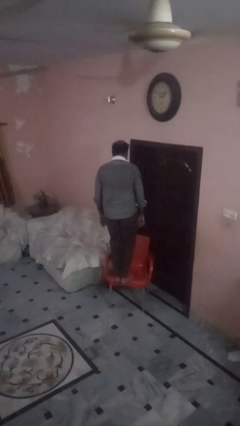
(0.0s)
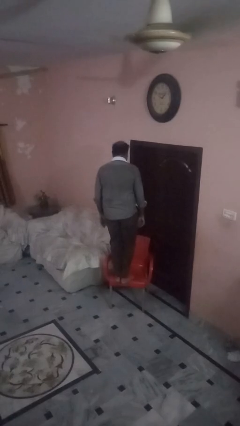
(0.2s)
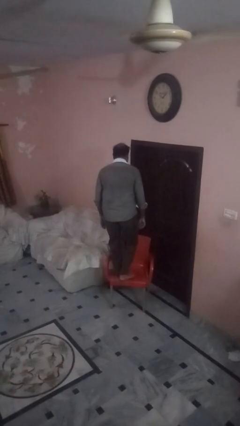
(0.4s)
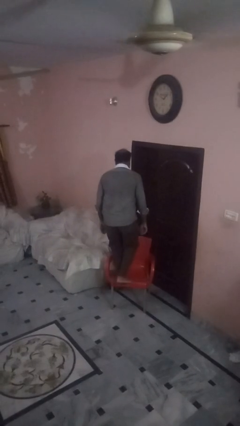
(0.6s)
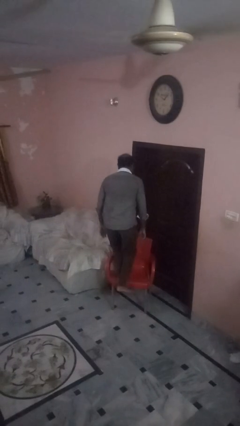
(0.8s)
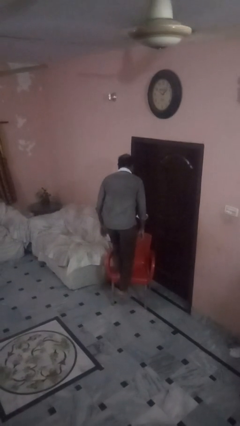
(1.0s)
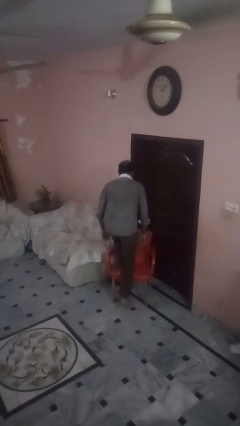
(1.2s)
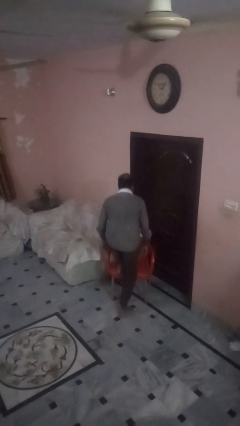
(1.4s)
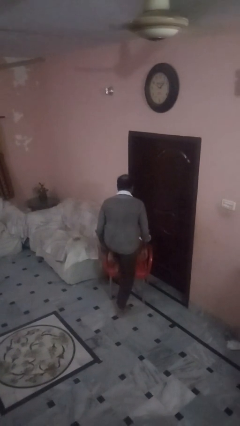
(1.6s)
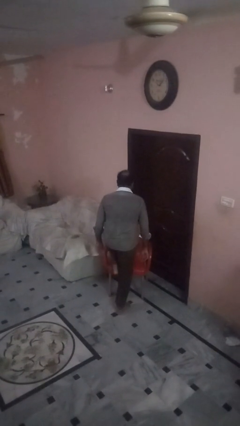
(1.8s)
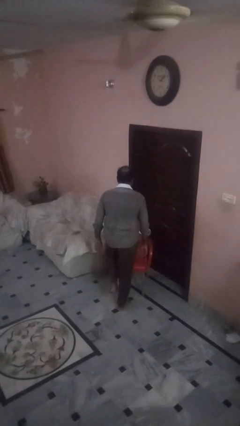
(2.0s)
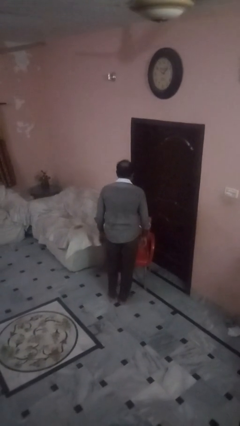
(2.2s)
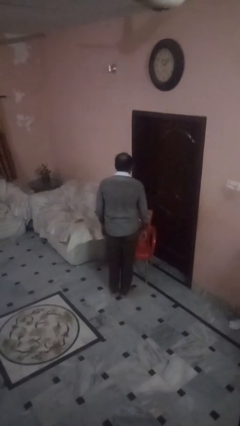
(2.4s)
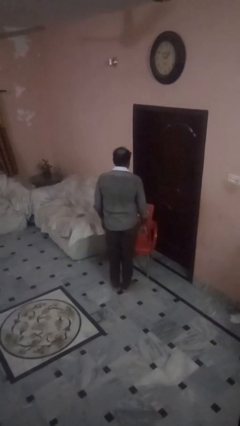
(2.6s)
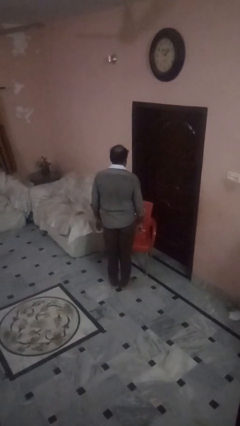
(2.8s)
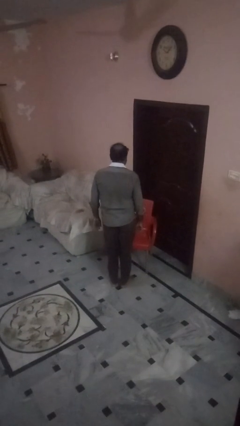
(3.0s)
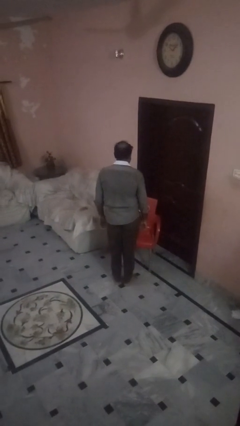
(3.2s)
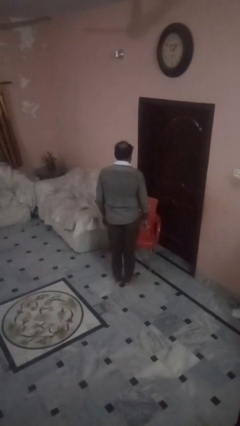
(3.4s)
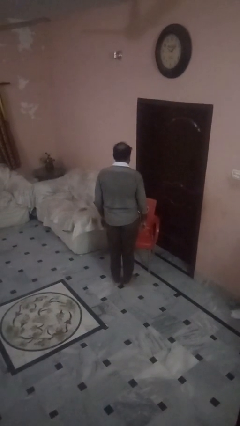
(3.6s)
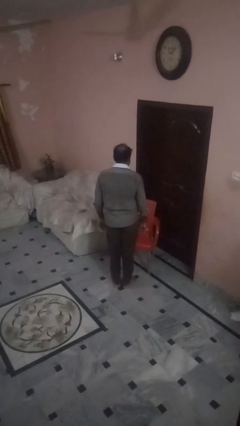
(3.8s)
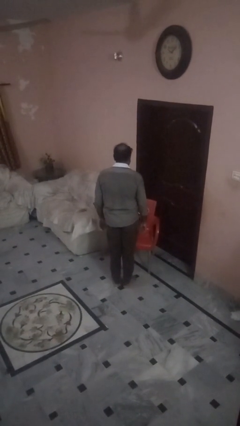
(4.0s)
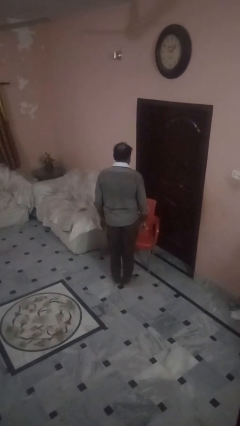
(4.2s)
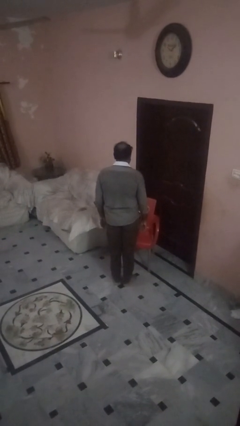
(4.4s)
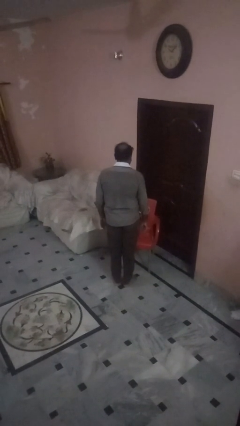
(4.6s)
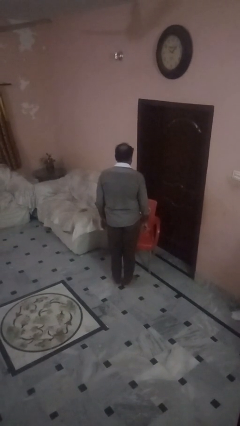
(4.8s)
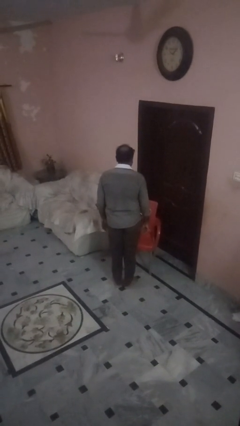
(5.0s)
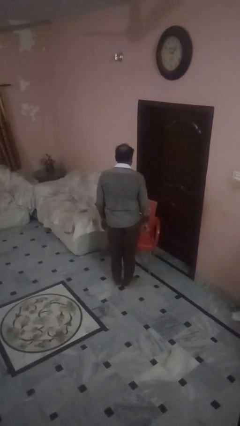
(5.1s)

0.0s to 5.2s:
person climbs off chair

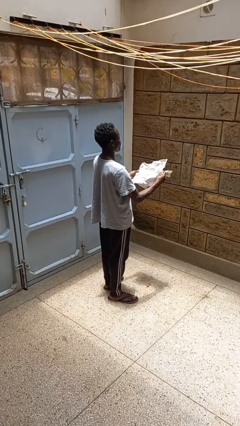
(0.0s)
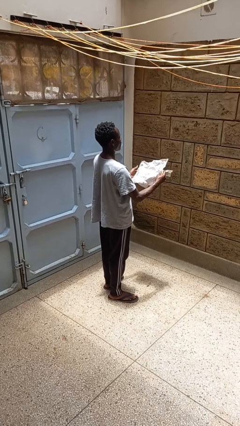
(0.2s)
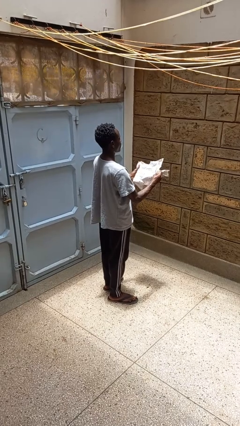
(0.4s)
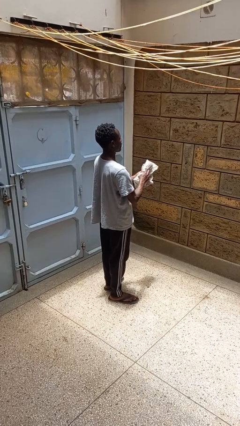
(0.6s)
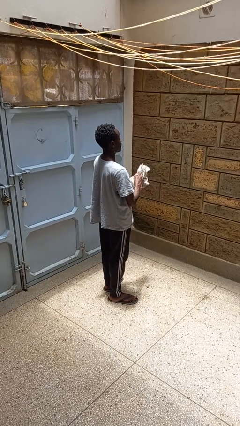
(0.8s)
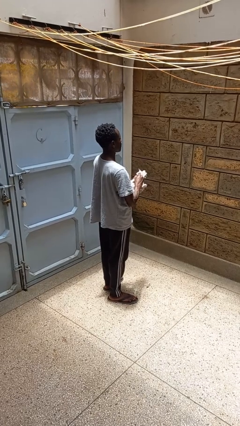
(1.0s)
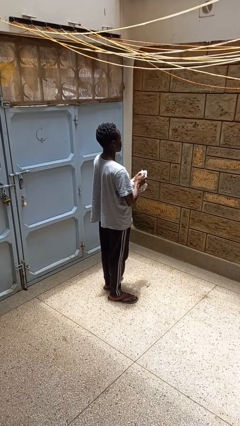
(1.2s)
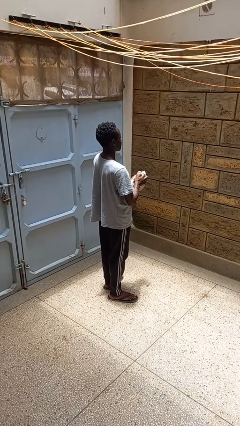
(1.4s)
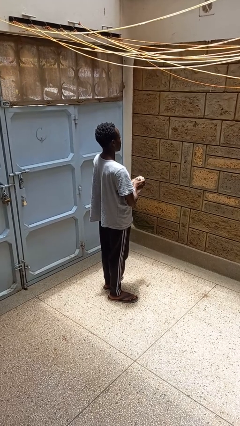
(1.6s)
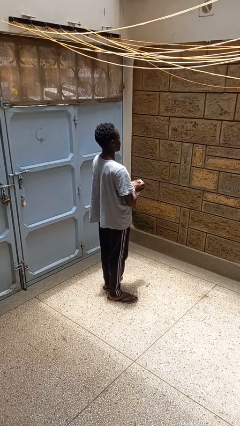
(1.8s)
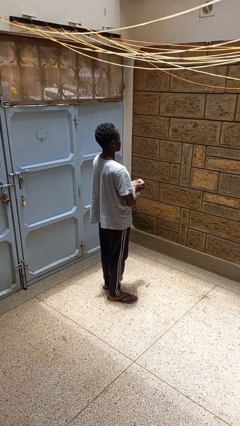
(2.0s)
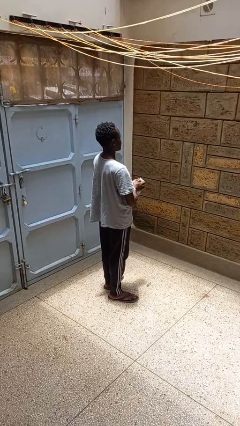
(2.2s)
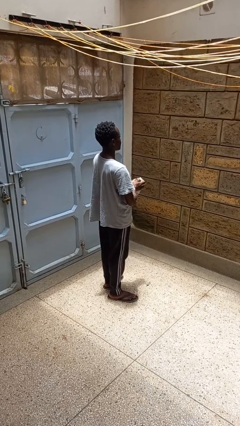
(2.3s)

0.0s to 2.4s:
person crumples paper

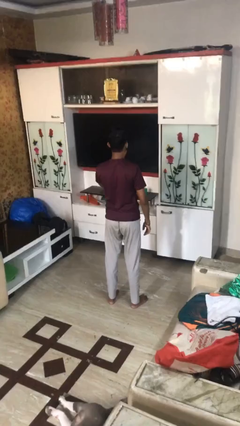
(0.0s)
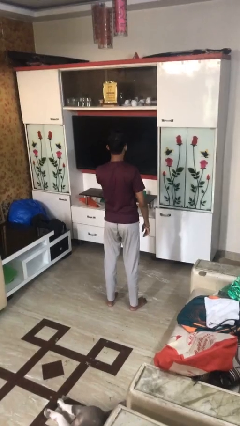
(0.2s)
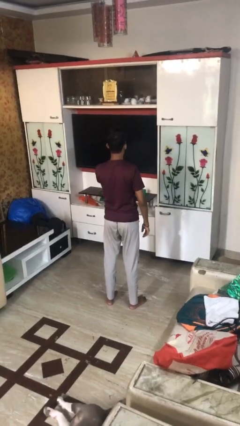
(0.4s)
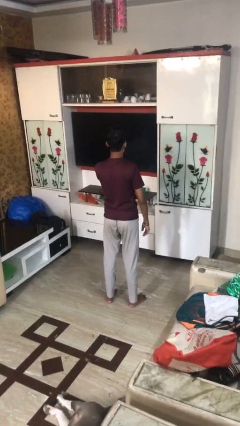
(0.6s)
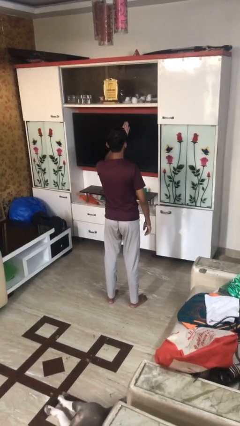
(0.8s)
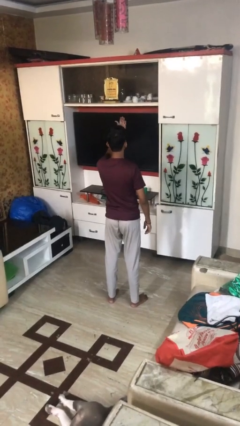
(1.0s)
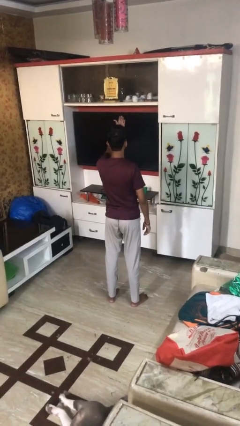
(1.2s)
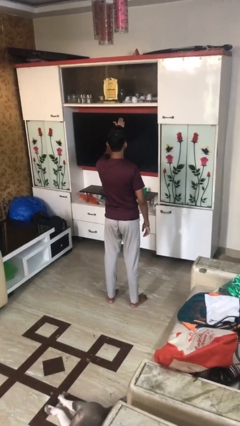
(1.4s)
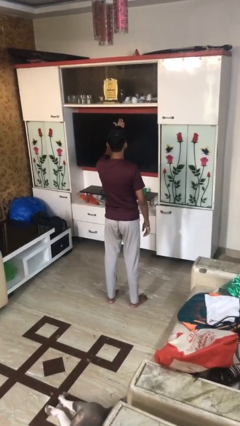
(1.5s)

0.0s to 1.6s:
person gestures blow kiss

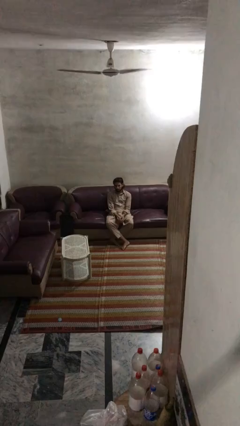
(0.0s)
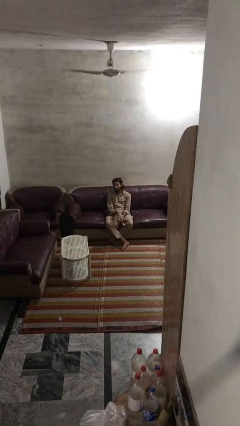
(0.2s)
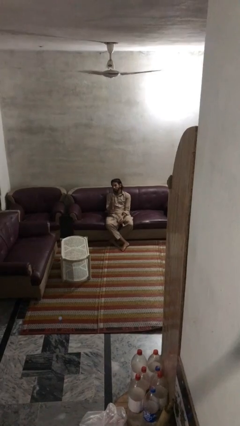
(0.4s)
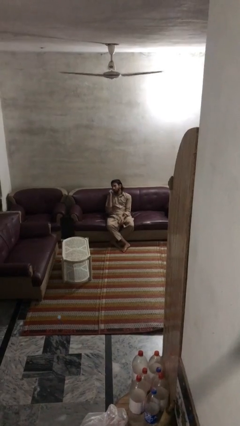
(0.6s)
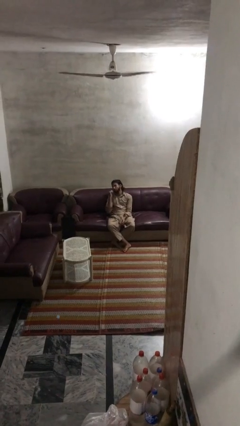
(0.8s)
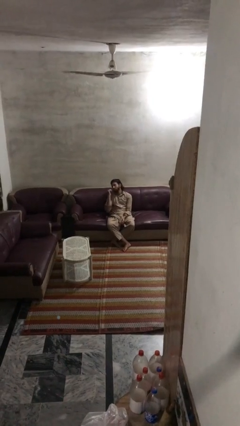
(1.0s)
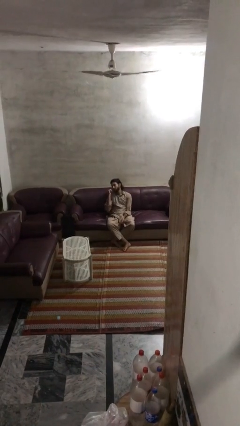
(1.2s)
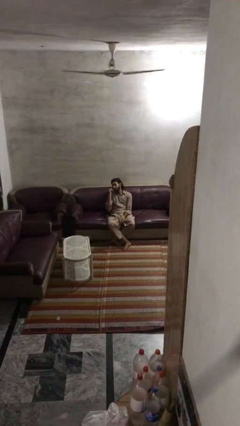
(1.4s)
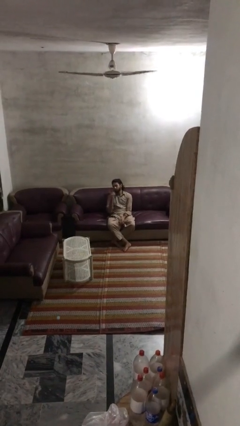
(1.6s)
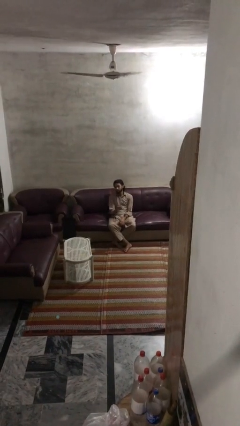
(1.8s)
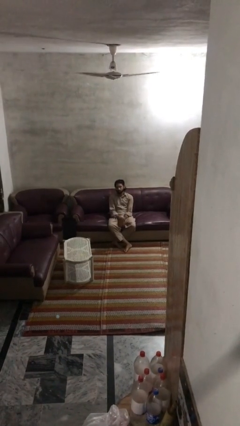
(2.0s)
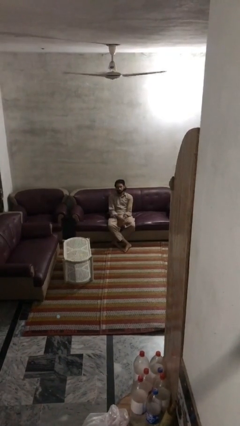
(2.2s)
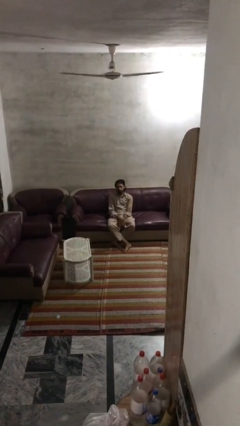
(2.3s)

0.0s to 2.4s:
person gestures behind me

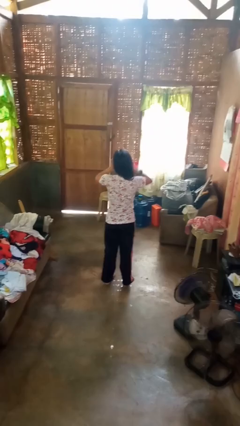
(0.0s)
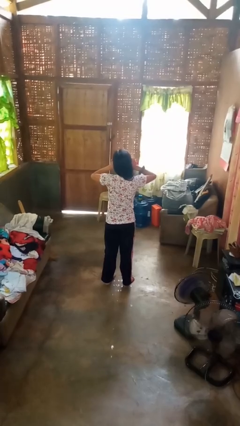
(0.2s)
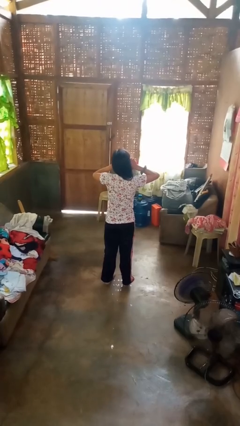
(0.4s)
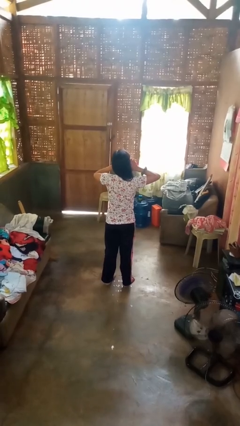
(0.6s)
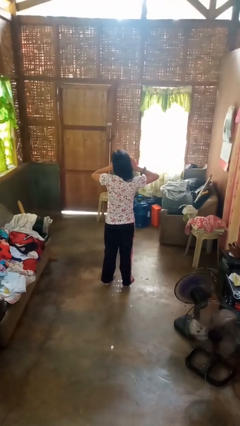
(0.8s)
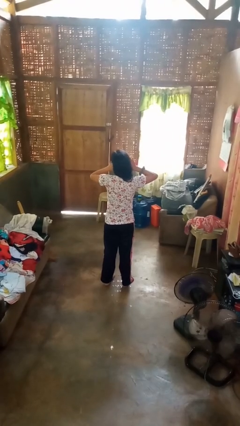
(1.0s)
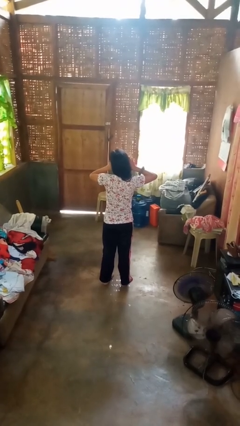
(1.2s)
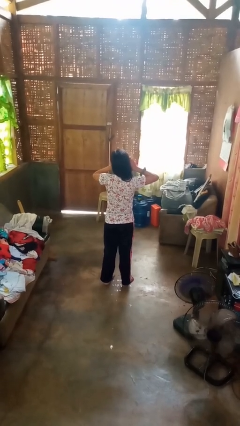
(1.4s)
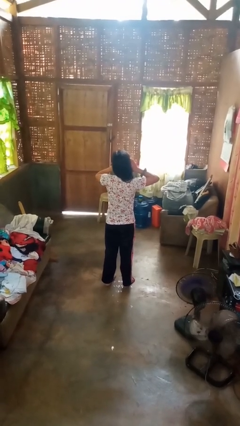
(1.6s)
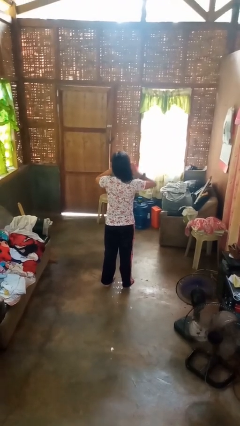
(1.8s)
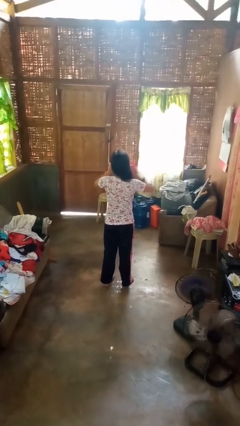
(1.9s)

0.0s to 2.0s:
person puts fingers in ear

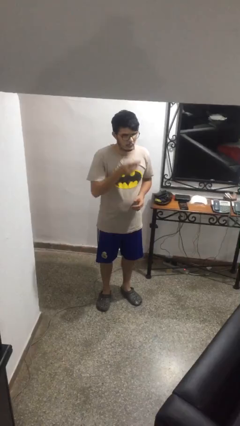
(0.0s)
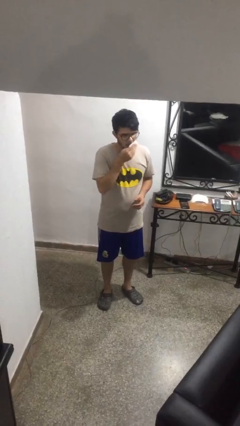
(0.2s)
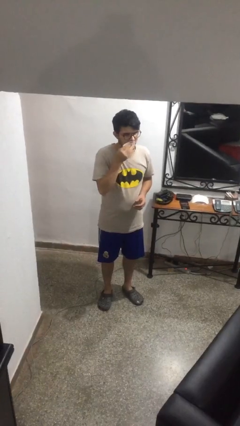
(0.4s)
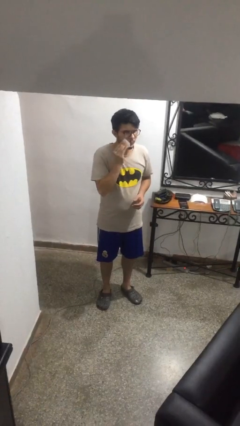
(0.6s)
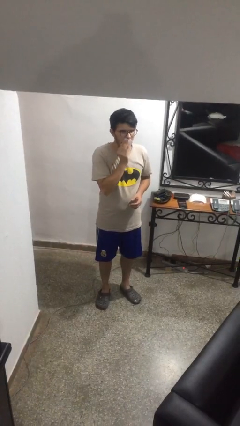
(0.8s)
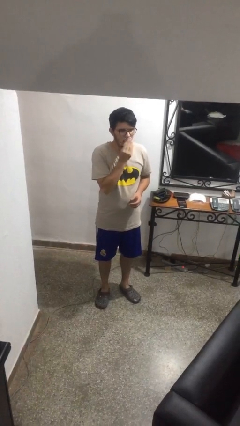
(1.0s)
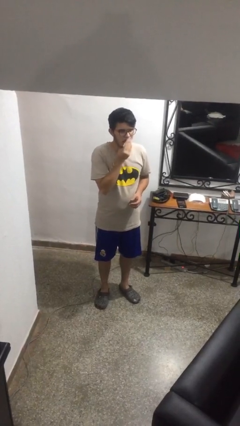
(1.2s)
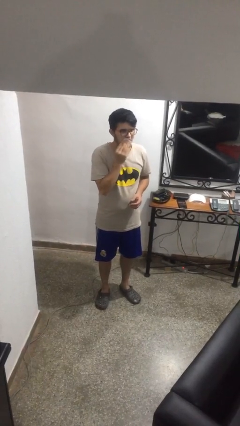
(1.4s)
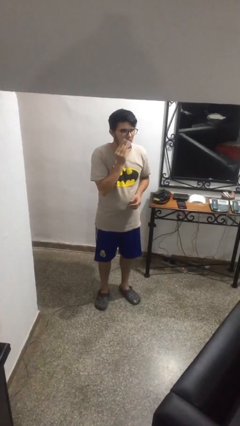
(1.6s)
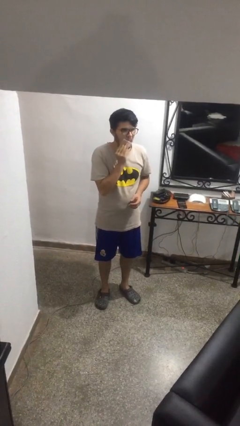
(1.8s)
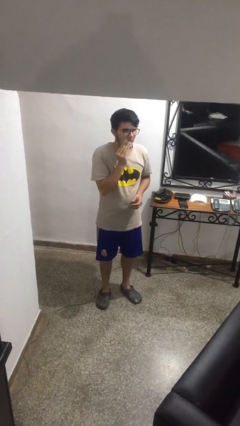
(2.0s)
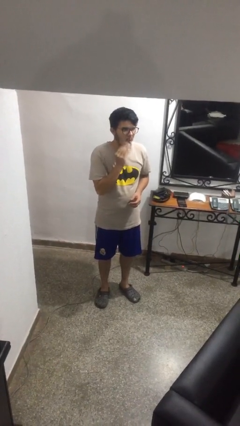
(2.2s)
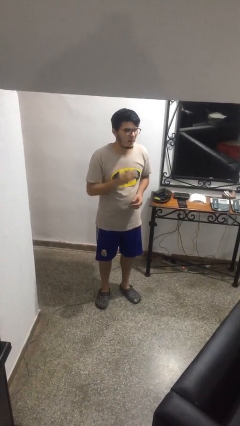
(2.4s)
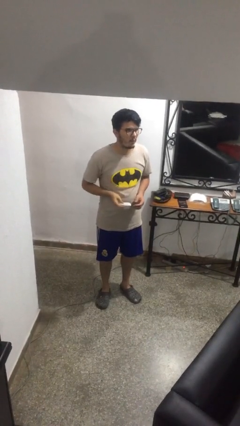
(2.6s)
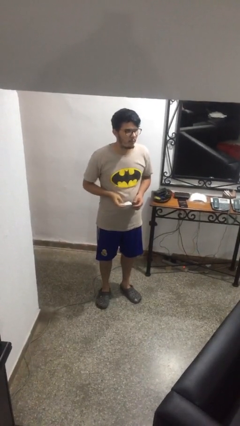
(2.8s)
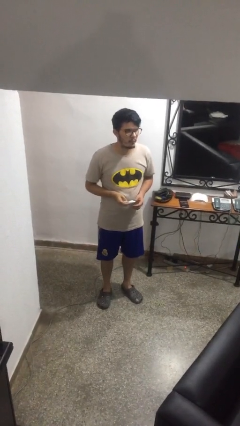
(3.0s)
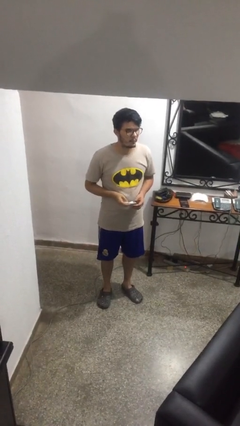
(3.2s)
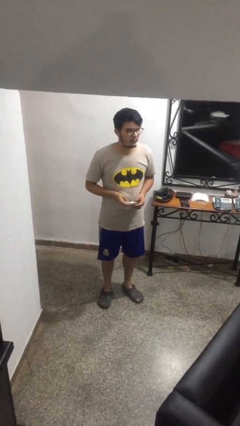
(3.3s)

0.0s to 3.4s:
person wipes mouth with napkin

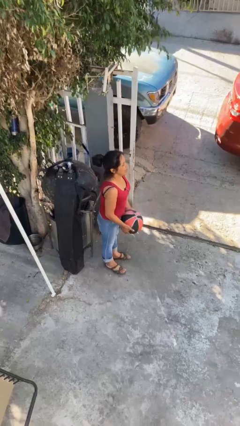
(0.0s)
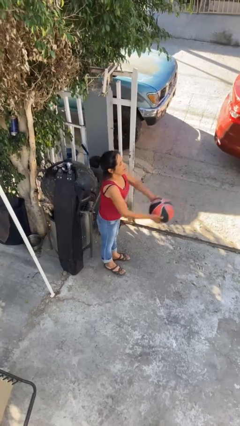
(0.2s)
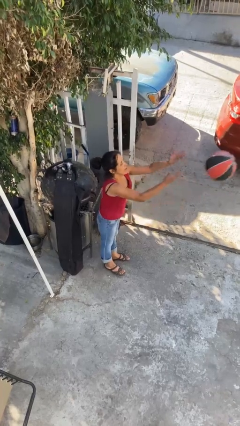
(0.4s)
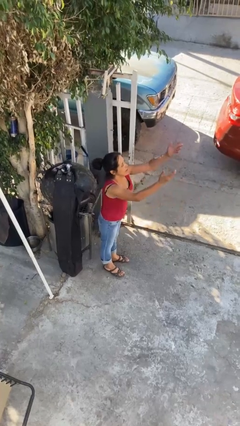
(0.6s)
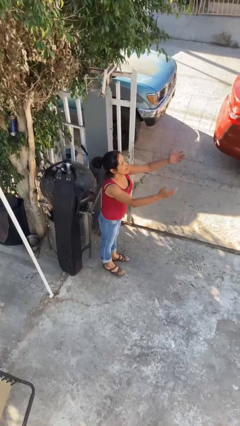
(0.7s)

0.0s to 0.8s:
person throws object to person
